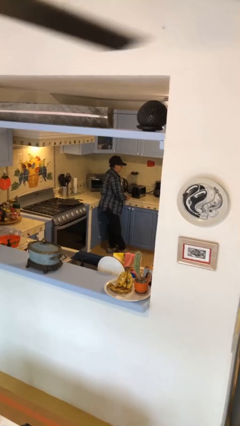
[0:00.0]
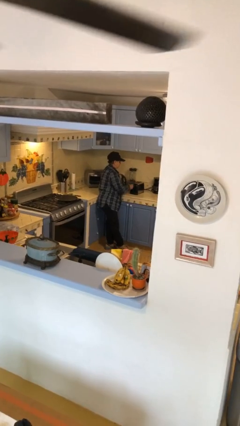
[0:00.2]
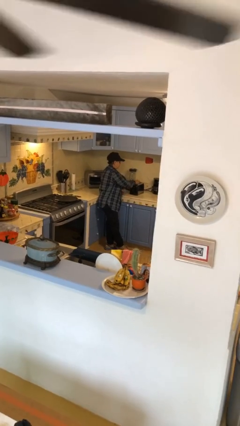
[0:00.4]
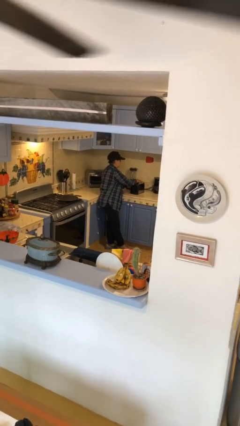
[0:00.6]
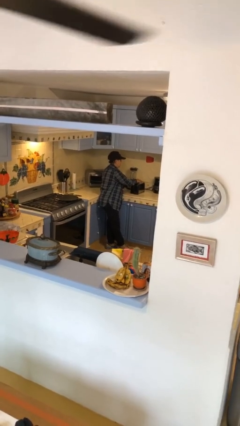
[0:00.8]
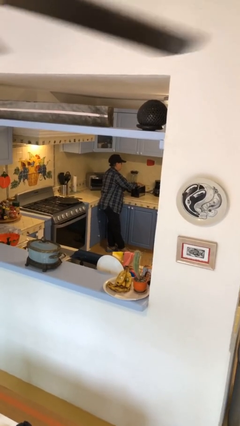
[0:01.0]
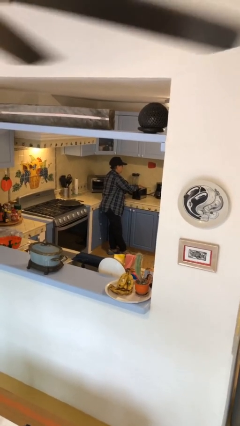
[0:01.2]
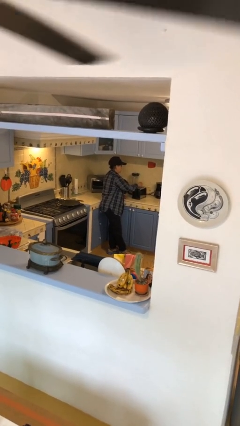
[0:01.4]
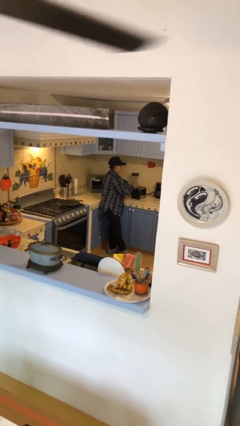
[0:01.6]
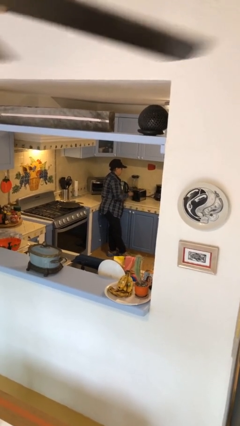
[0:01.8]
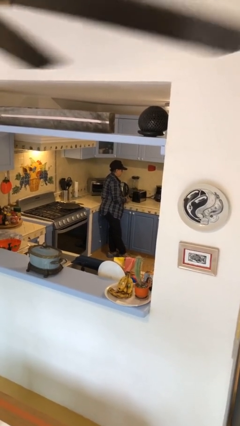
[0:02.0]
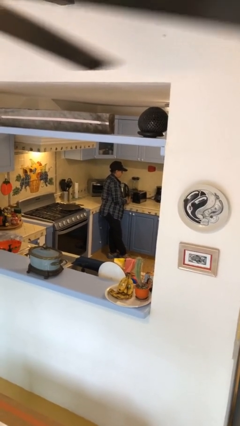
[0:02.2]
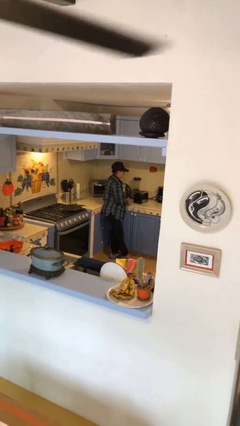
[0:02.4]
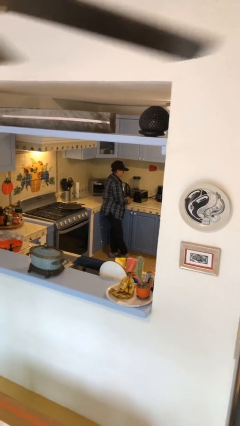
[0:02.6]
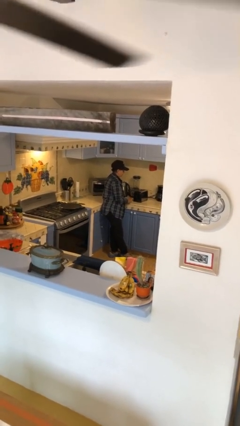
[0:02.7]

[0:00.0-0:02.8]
person takes object from toaster

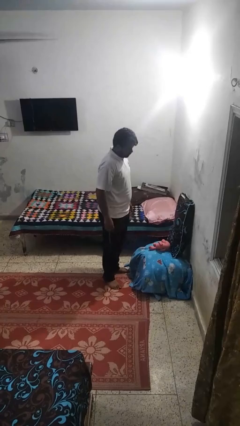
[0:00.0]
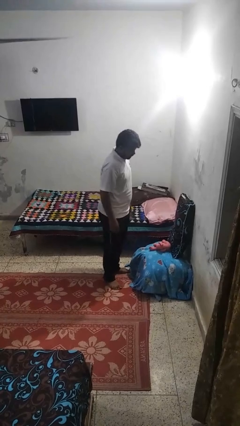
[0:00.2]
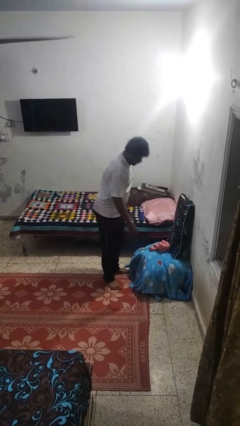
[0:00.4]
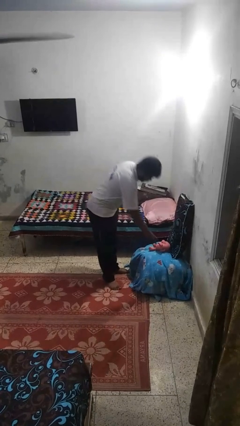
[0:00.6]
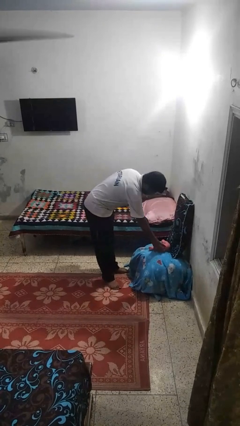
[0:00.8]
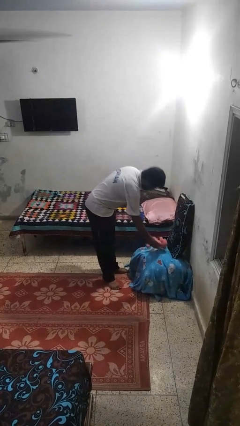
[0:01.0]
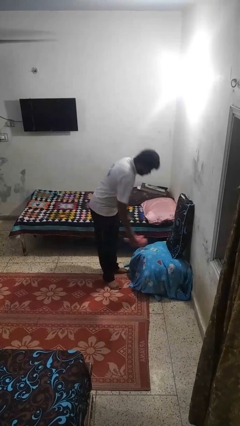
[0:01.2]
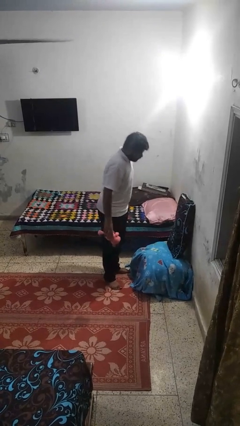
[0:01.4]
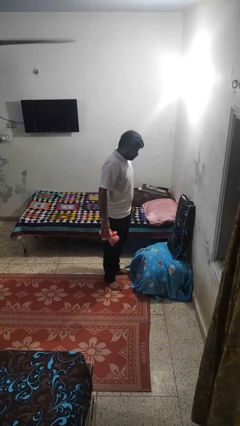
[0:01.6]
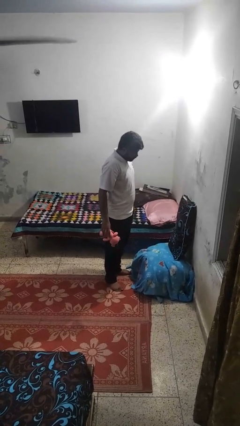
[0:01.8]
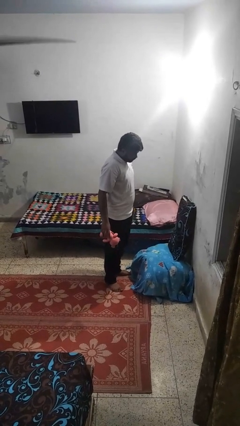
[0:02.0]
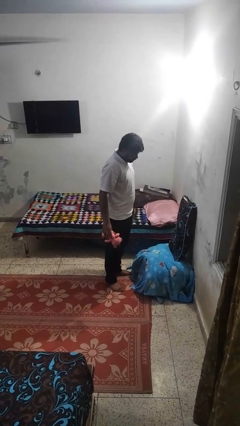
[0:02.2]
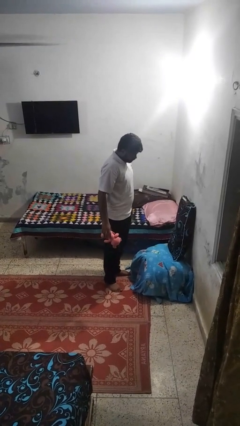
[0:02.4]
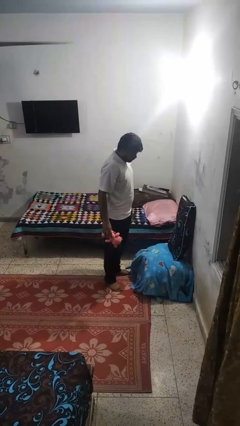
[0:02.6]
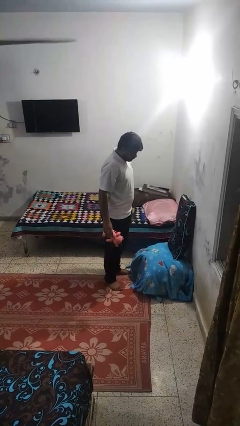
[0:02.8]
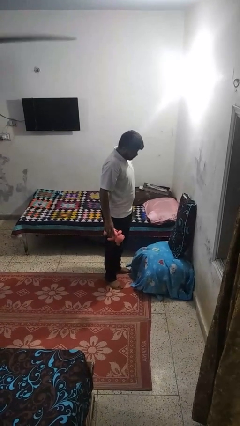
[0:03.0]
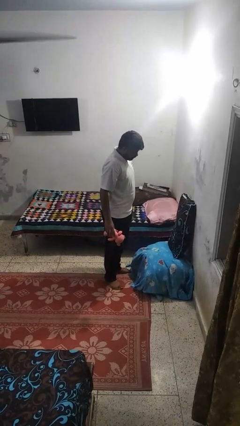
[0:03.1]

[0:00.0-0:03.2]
person picks up object from couch

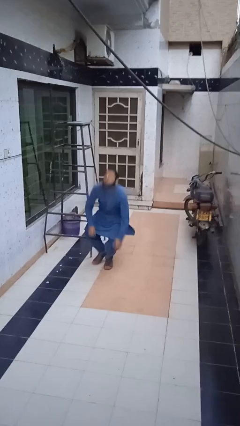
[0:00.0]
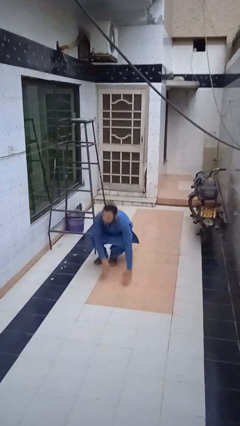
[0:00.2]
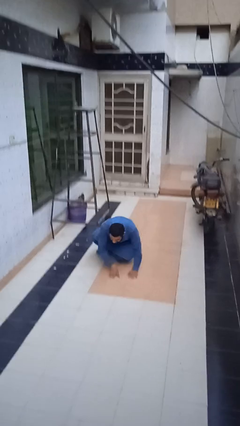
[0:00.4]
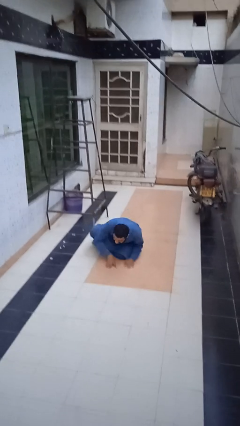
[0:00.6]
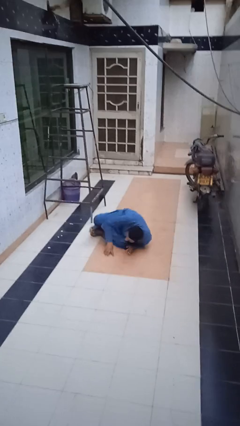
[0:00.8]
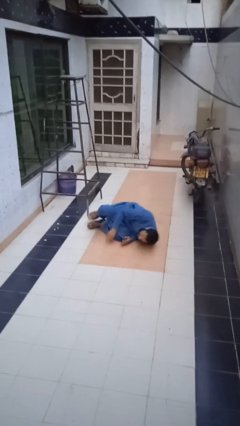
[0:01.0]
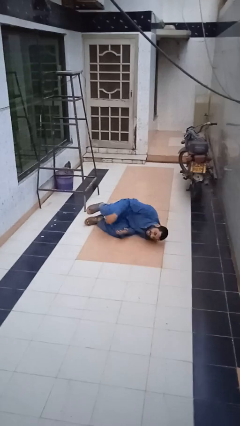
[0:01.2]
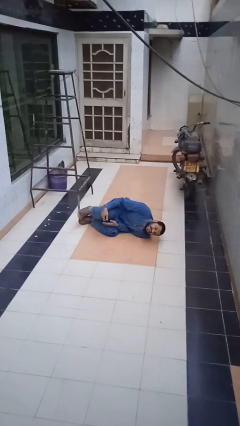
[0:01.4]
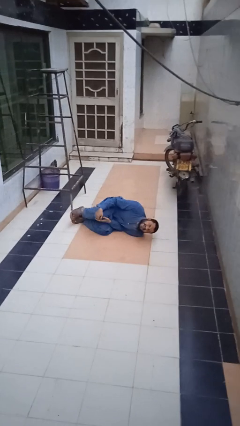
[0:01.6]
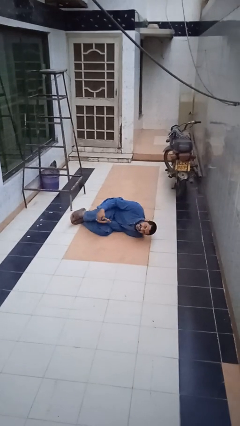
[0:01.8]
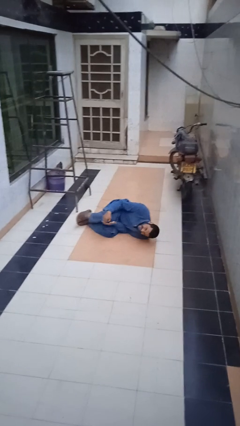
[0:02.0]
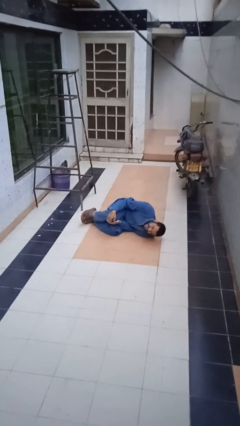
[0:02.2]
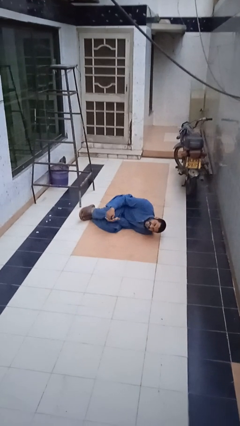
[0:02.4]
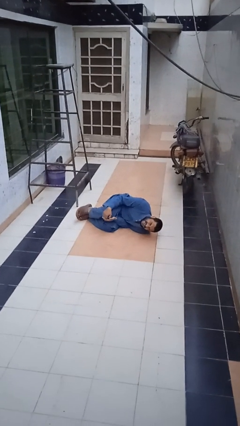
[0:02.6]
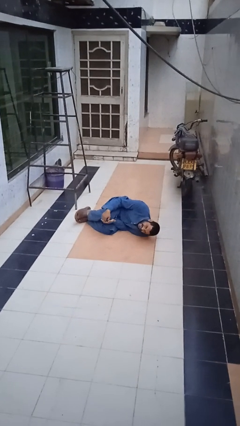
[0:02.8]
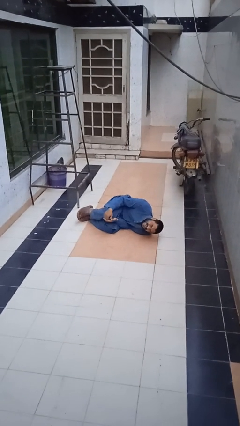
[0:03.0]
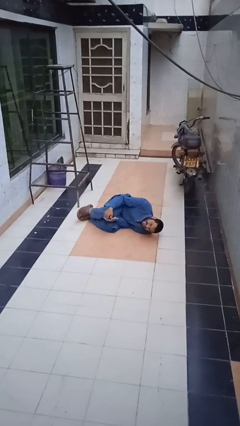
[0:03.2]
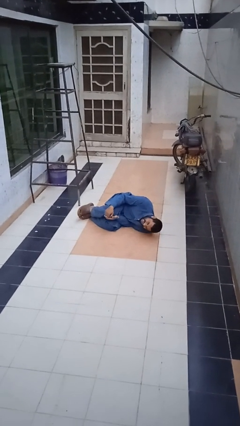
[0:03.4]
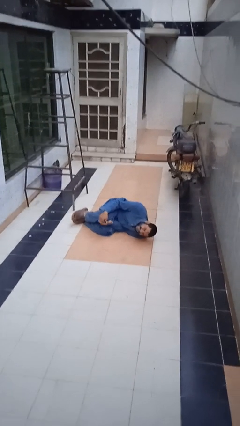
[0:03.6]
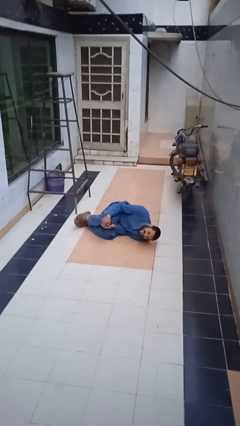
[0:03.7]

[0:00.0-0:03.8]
person lies down on floor

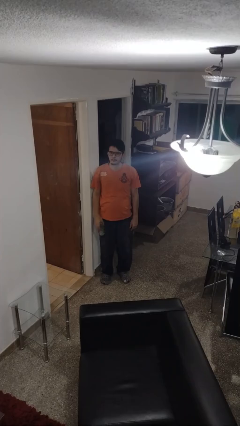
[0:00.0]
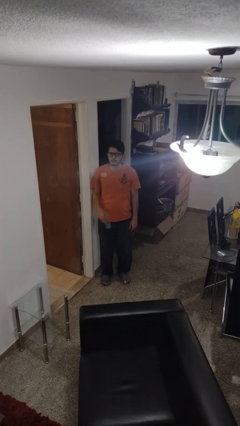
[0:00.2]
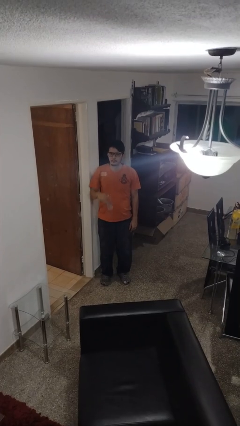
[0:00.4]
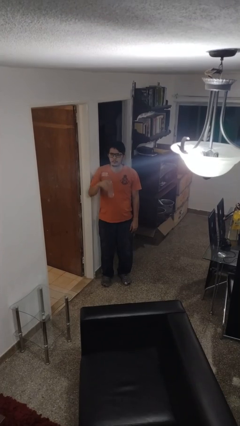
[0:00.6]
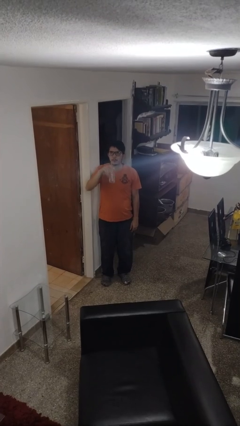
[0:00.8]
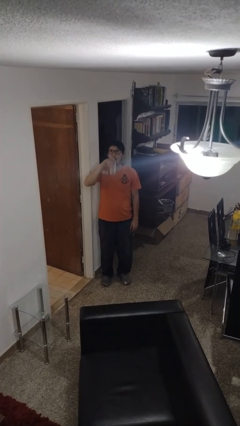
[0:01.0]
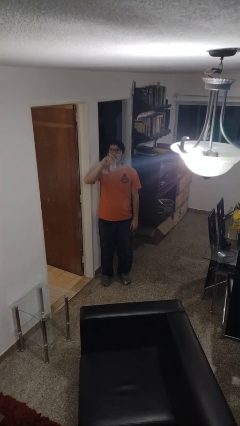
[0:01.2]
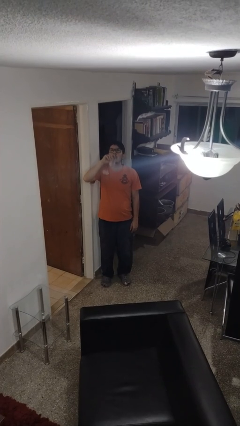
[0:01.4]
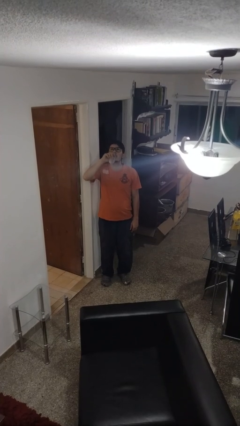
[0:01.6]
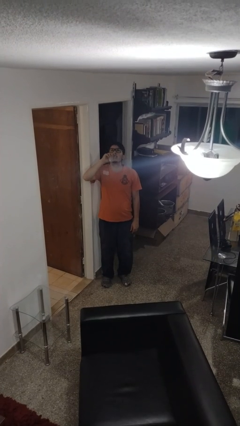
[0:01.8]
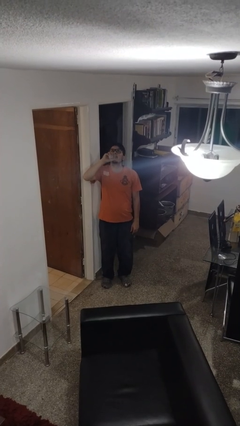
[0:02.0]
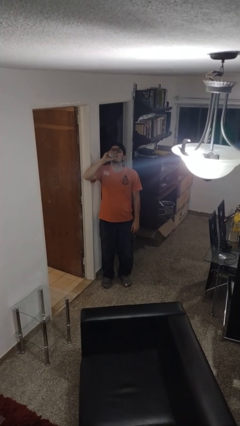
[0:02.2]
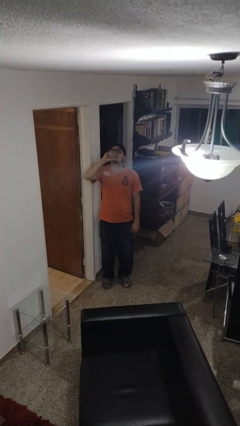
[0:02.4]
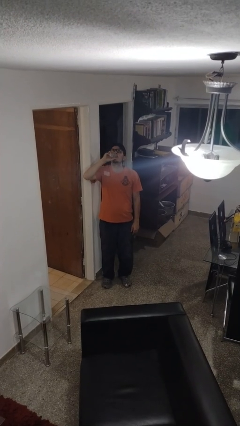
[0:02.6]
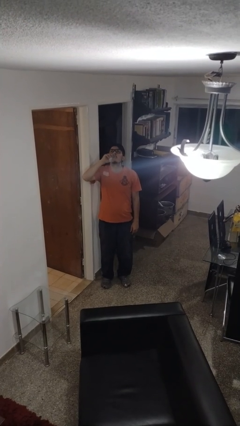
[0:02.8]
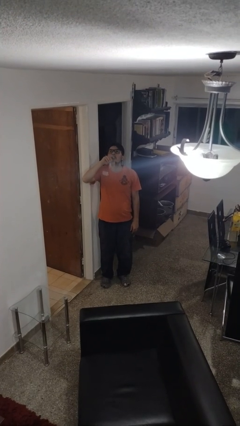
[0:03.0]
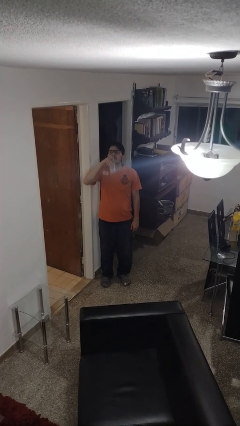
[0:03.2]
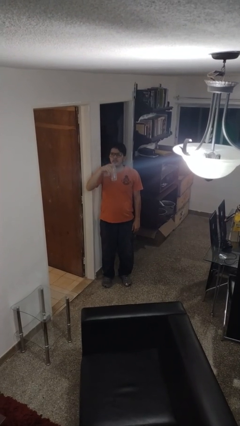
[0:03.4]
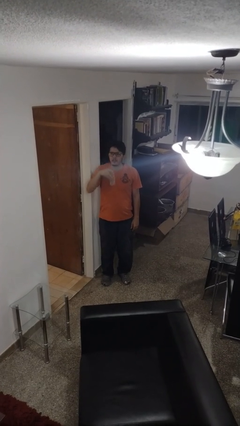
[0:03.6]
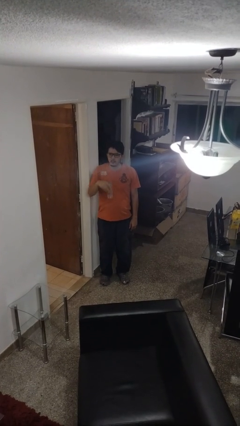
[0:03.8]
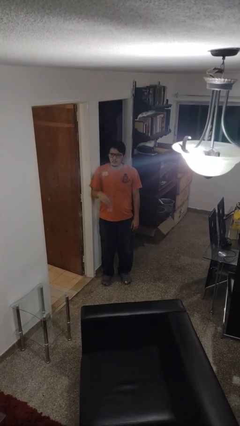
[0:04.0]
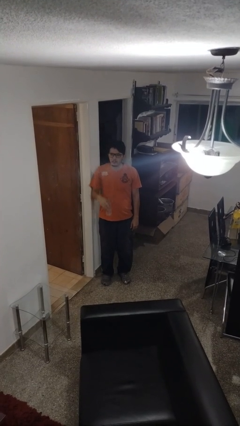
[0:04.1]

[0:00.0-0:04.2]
person drinks from bottle

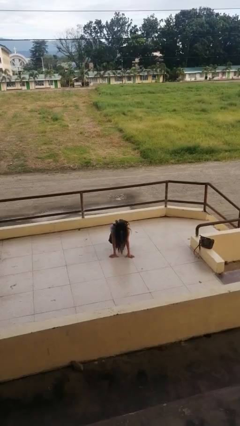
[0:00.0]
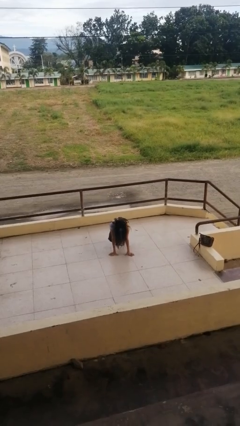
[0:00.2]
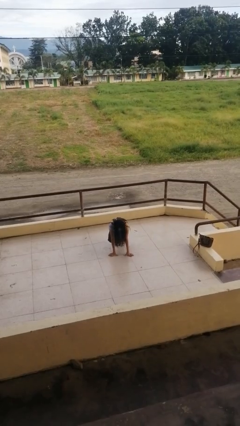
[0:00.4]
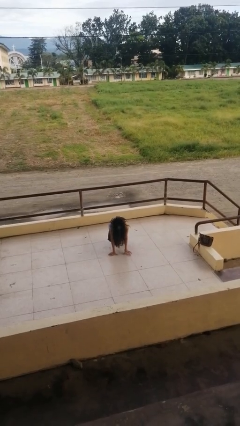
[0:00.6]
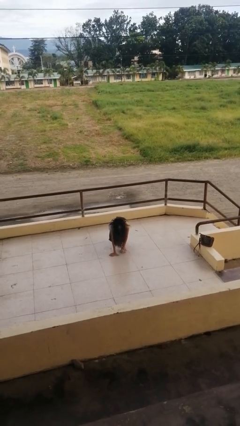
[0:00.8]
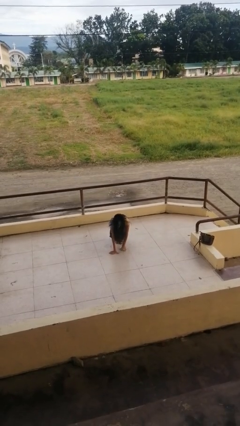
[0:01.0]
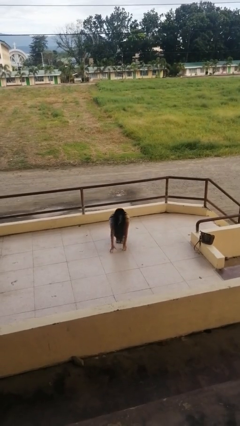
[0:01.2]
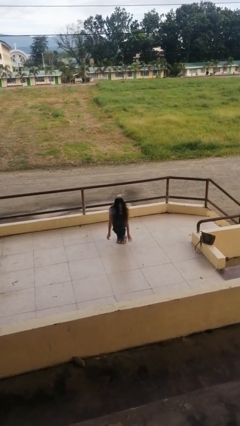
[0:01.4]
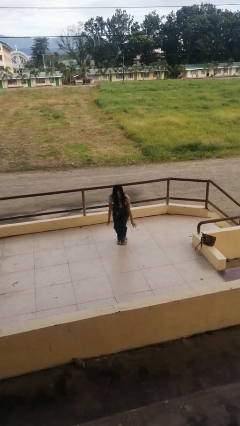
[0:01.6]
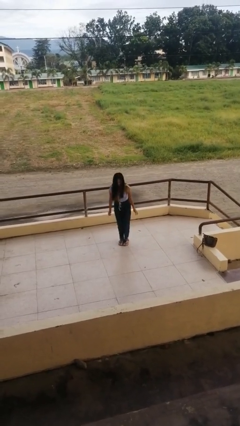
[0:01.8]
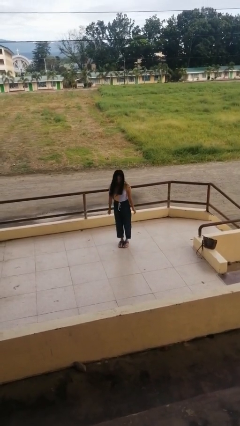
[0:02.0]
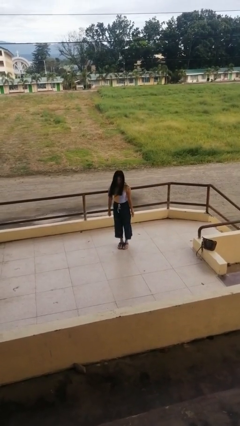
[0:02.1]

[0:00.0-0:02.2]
person stands up from floor

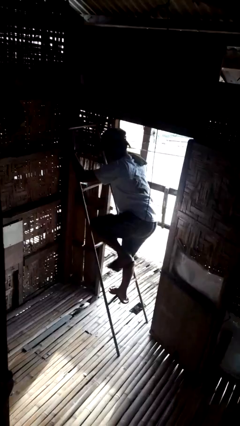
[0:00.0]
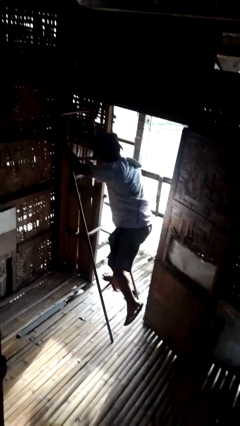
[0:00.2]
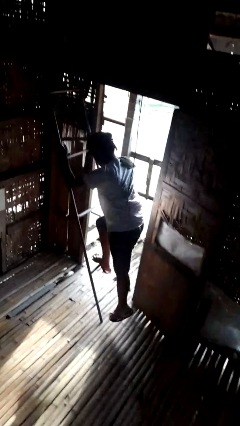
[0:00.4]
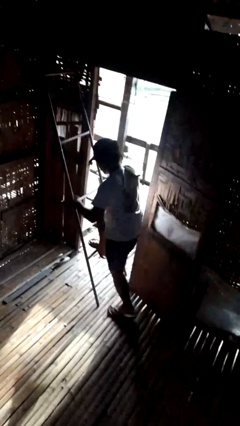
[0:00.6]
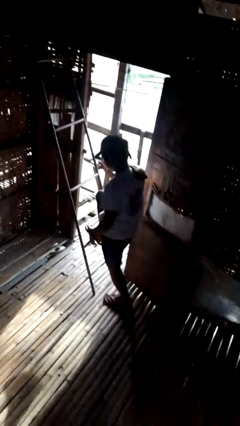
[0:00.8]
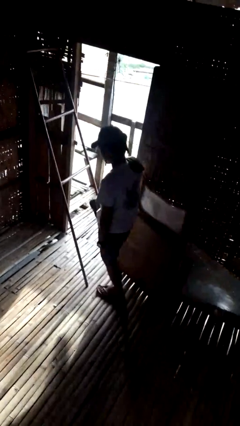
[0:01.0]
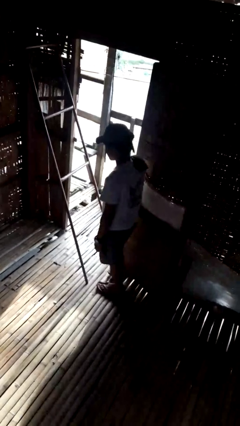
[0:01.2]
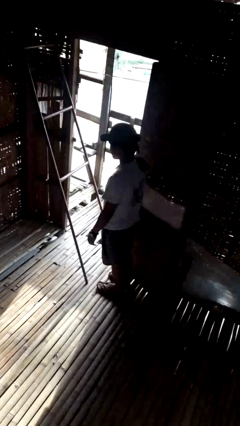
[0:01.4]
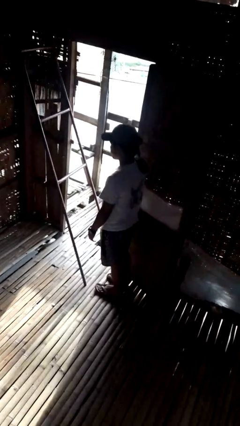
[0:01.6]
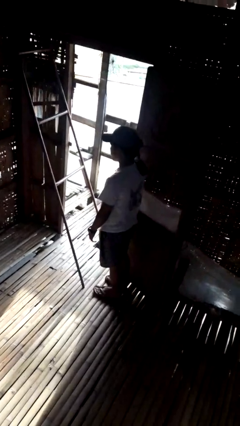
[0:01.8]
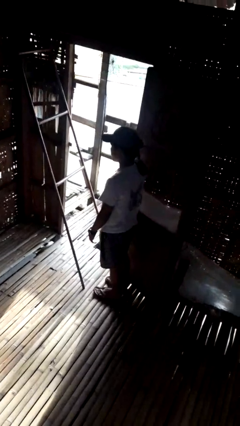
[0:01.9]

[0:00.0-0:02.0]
person climbs down ladder
